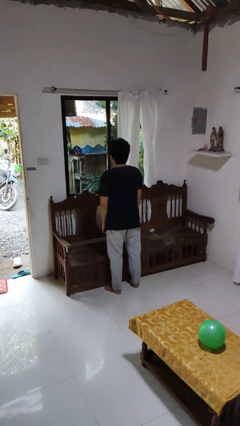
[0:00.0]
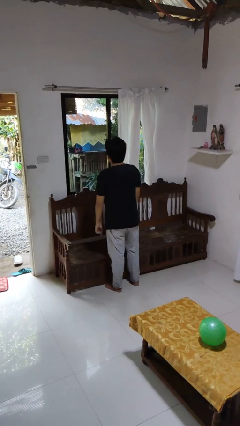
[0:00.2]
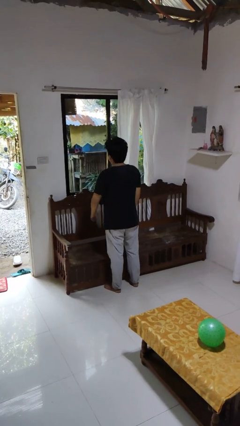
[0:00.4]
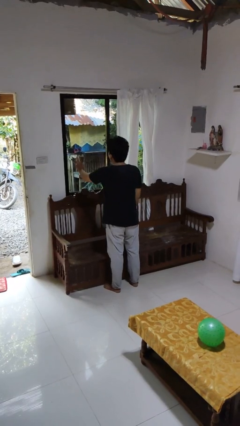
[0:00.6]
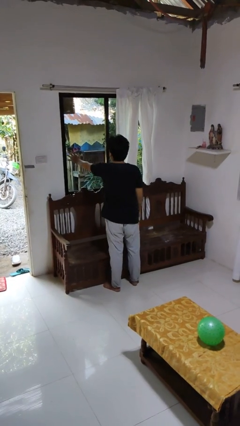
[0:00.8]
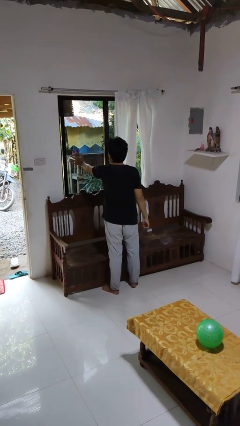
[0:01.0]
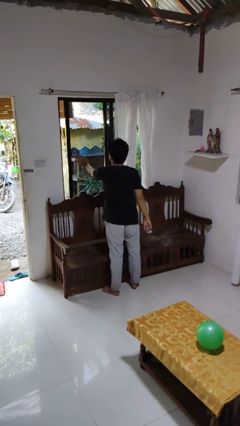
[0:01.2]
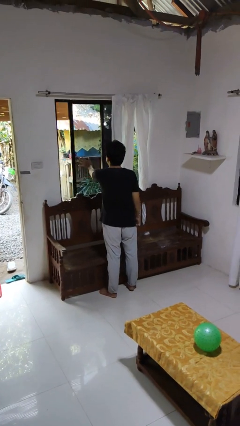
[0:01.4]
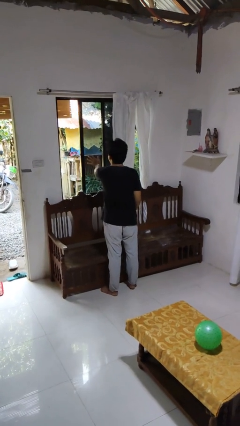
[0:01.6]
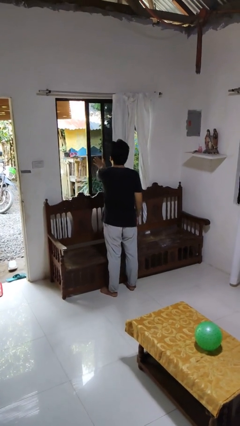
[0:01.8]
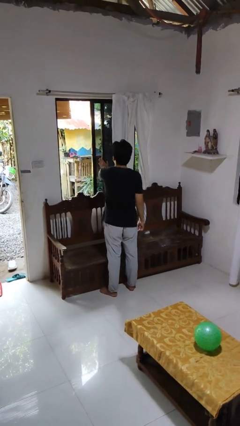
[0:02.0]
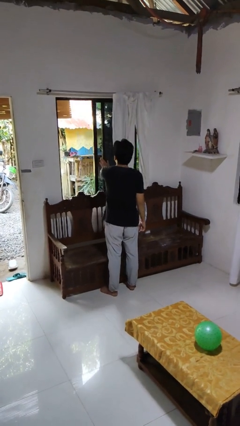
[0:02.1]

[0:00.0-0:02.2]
person opens home window

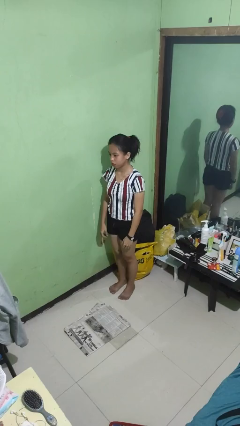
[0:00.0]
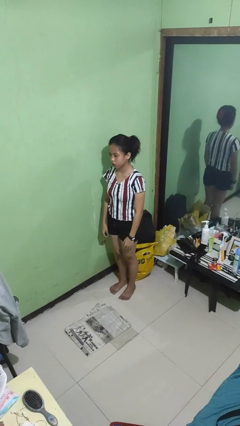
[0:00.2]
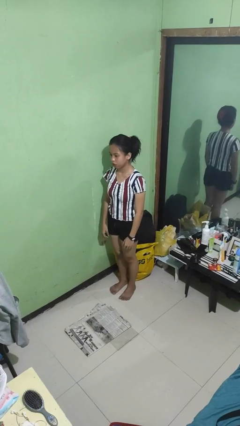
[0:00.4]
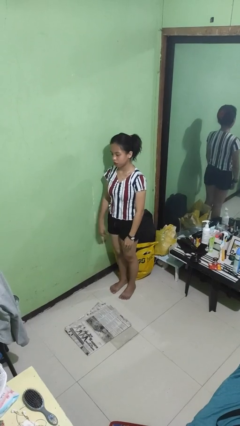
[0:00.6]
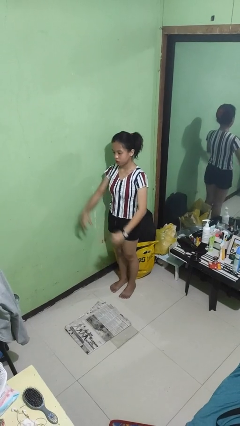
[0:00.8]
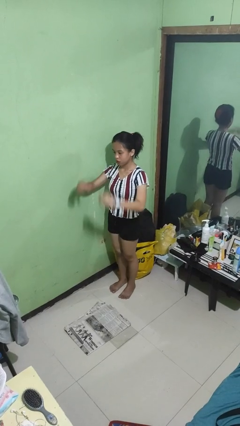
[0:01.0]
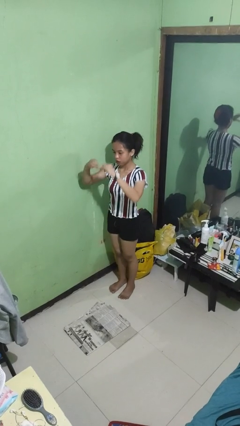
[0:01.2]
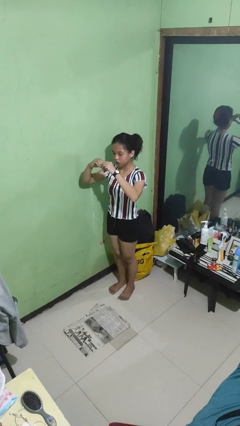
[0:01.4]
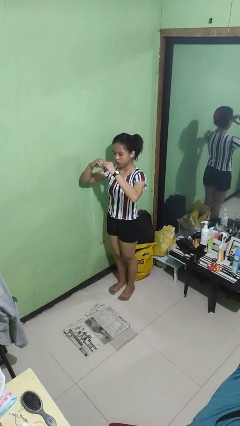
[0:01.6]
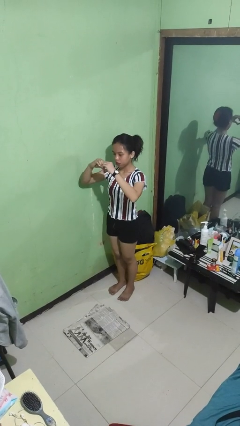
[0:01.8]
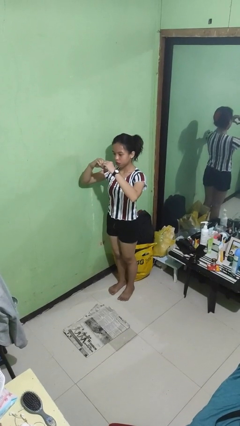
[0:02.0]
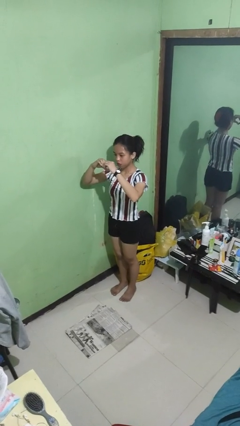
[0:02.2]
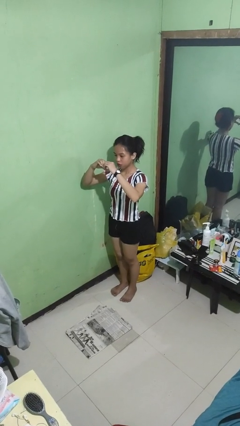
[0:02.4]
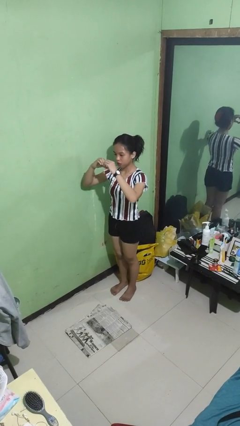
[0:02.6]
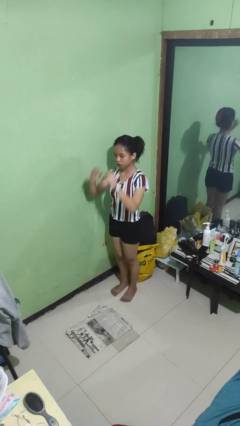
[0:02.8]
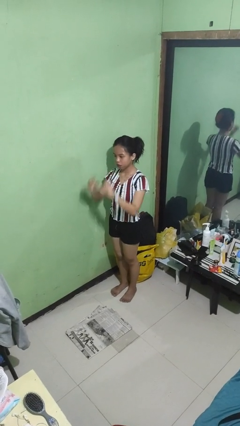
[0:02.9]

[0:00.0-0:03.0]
person gestures heart

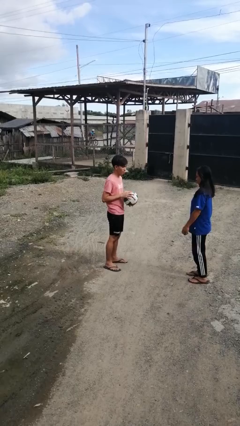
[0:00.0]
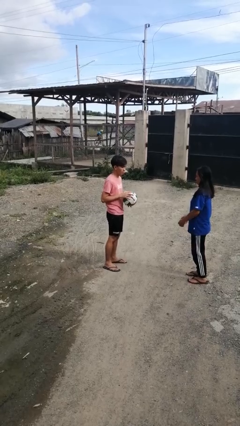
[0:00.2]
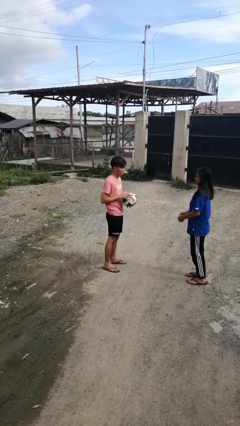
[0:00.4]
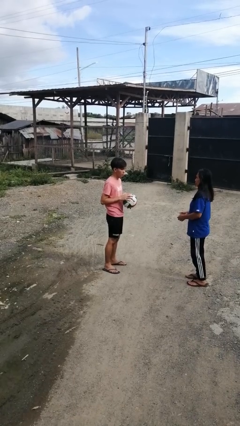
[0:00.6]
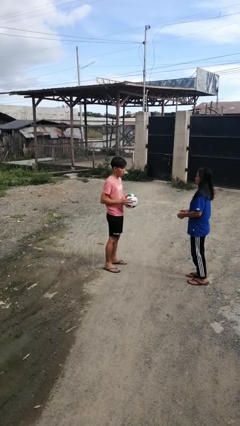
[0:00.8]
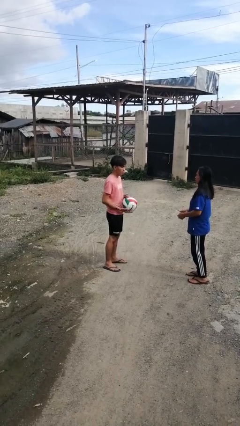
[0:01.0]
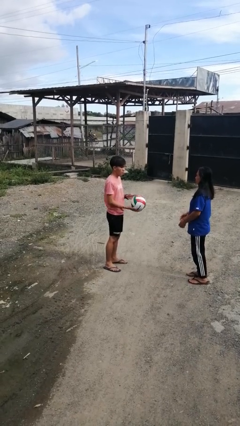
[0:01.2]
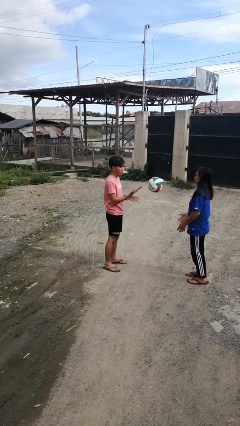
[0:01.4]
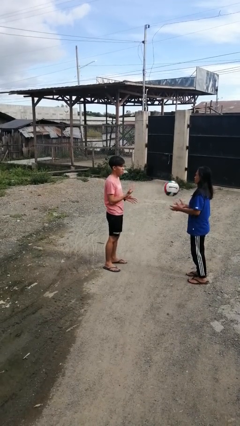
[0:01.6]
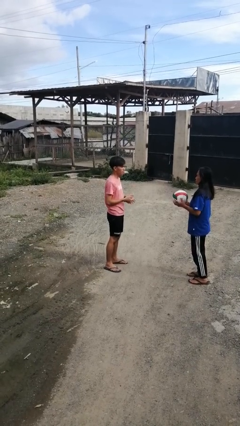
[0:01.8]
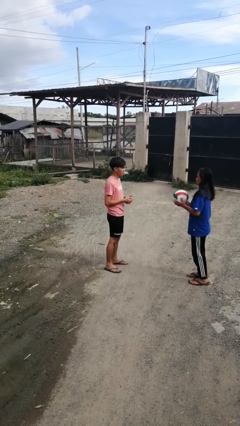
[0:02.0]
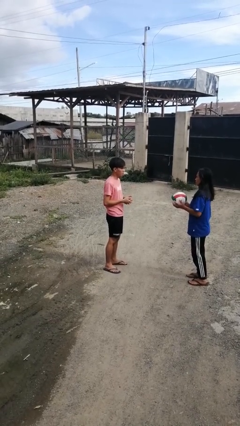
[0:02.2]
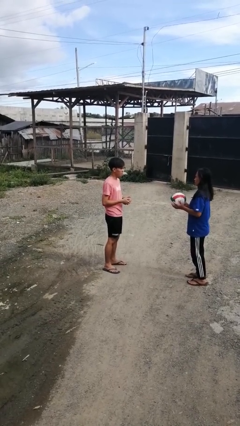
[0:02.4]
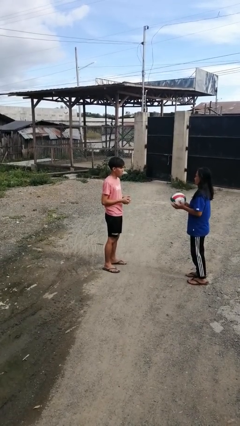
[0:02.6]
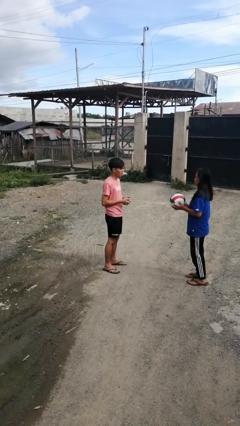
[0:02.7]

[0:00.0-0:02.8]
person throws object to person

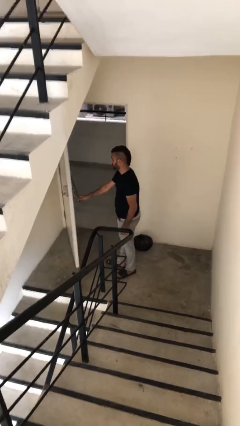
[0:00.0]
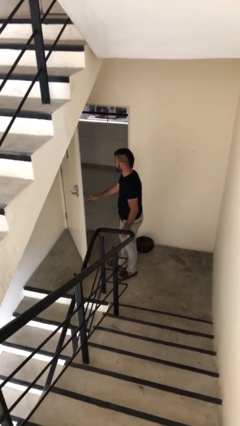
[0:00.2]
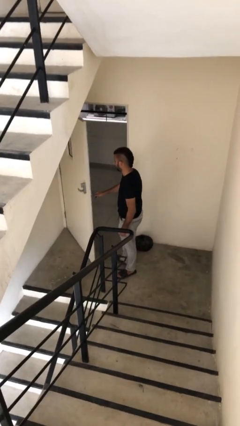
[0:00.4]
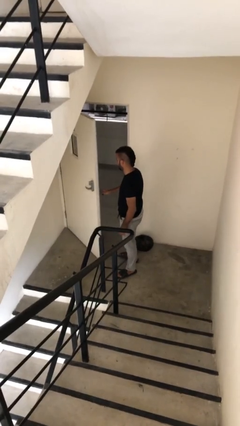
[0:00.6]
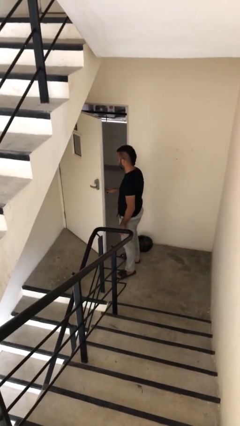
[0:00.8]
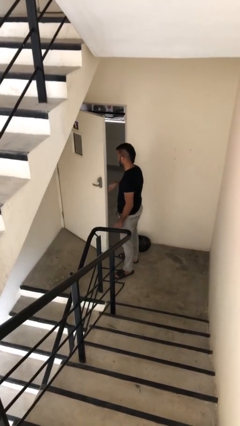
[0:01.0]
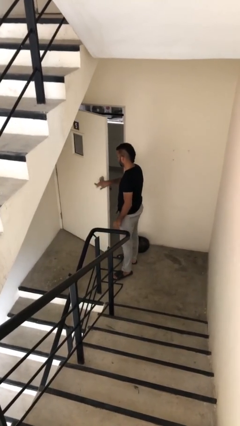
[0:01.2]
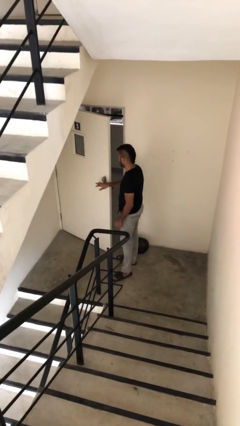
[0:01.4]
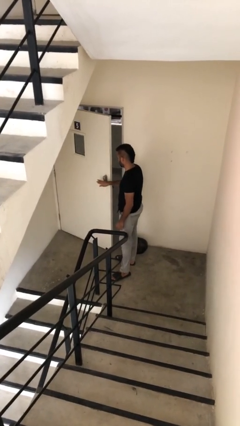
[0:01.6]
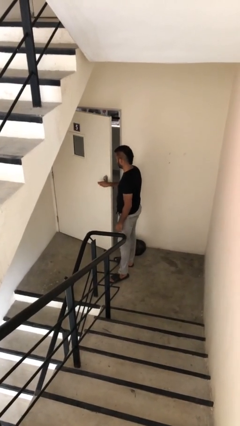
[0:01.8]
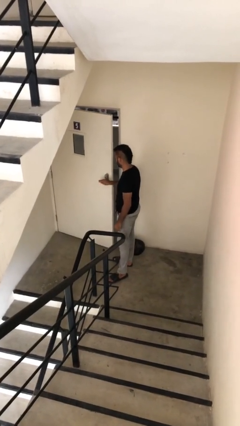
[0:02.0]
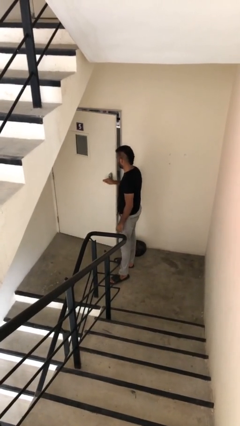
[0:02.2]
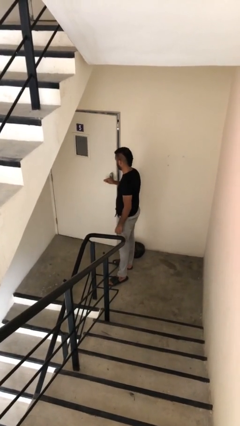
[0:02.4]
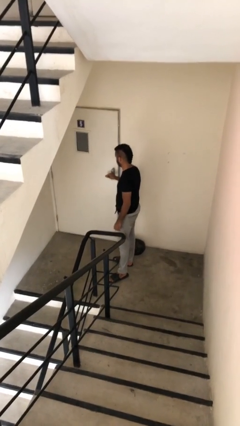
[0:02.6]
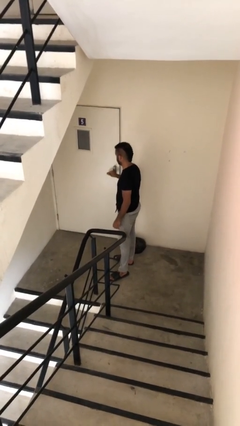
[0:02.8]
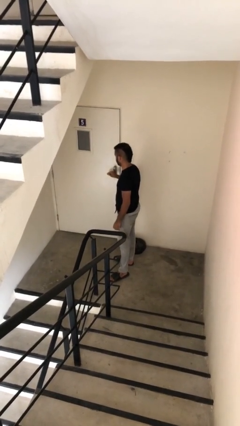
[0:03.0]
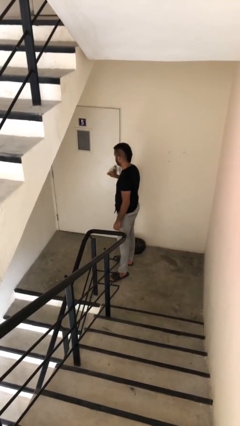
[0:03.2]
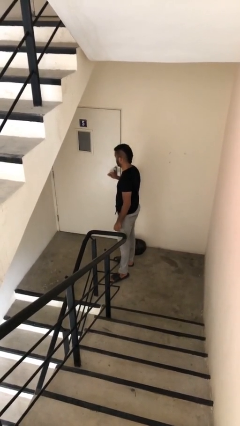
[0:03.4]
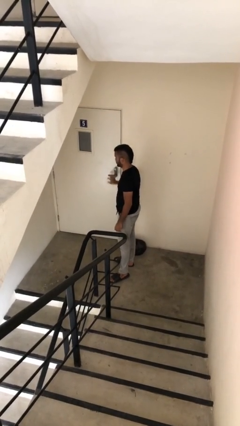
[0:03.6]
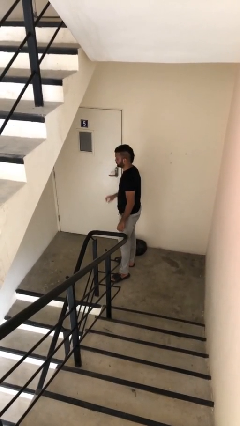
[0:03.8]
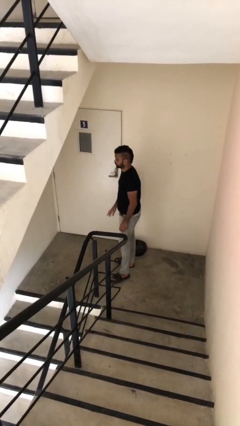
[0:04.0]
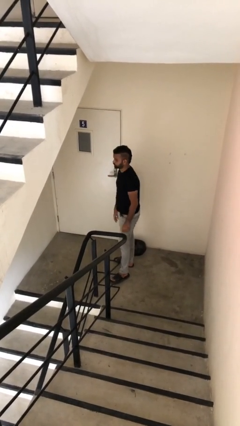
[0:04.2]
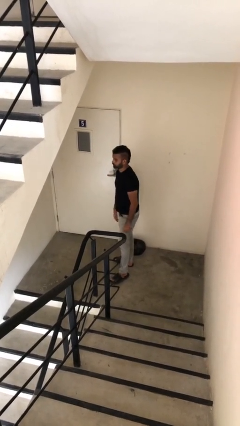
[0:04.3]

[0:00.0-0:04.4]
person closes facility door

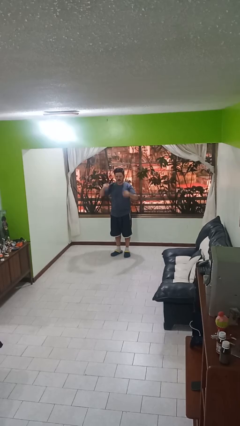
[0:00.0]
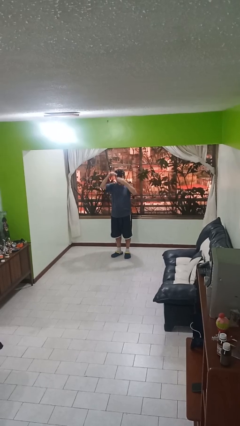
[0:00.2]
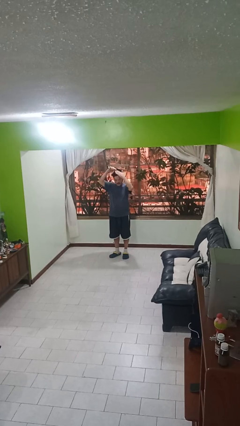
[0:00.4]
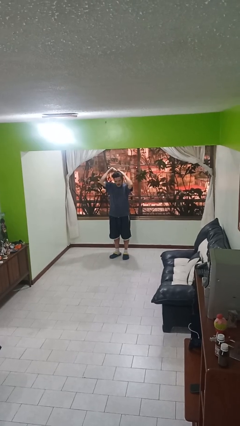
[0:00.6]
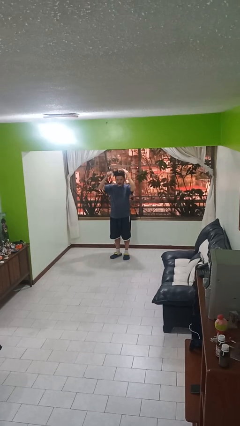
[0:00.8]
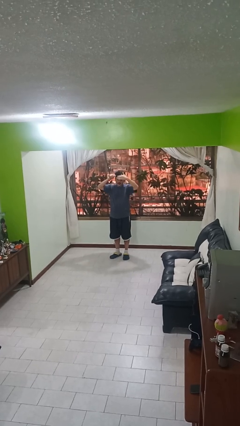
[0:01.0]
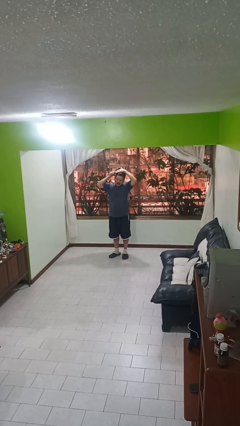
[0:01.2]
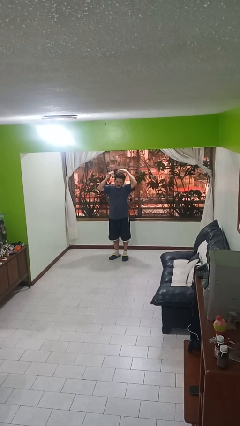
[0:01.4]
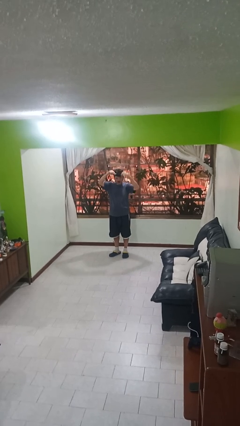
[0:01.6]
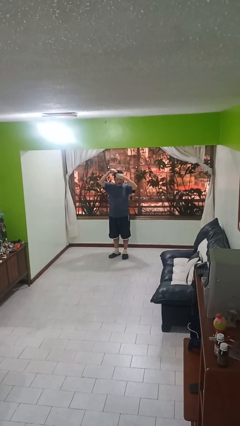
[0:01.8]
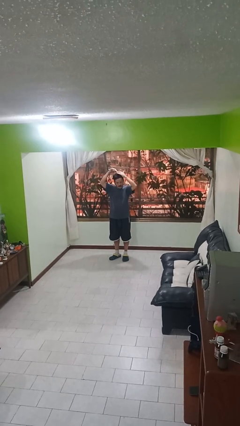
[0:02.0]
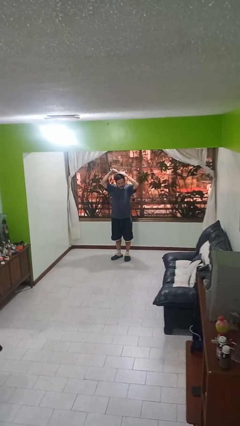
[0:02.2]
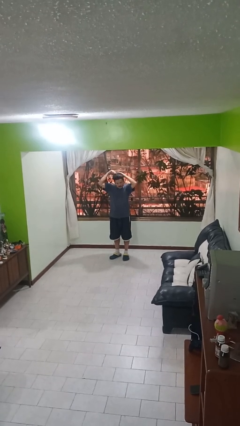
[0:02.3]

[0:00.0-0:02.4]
person brushes hair

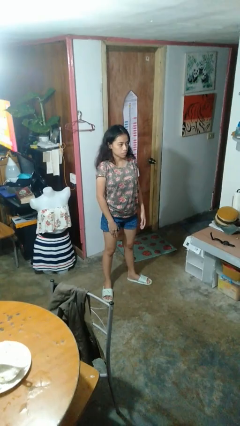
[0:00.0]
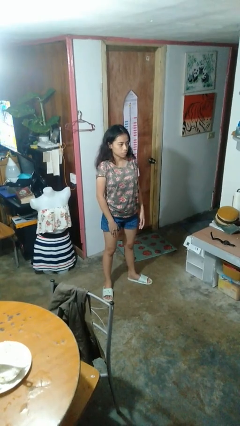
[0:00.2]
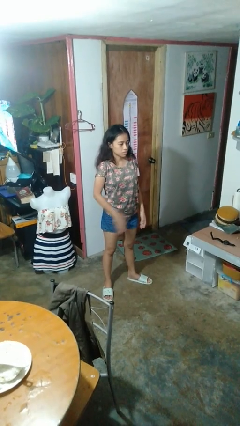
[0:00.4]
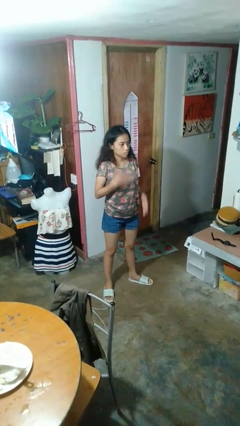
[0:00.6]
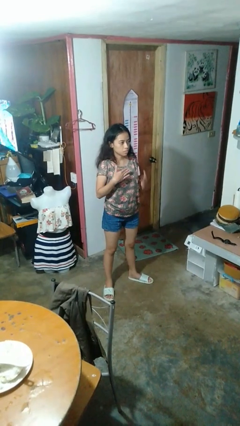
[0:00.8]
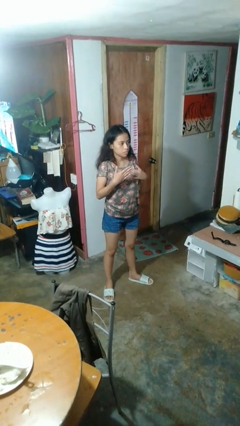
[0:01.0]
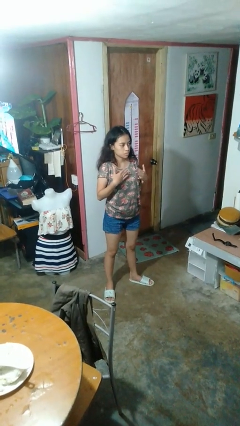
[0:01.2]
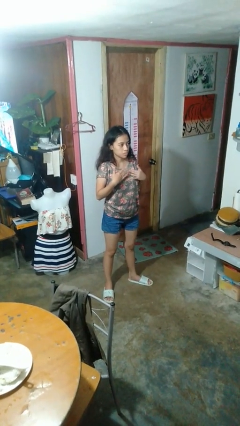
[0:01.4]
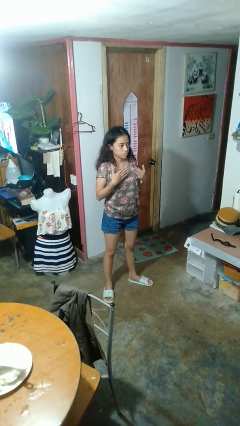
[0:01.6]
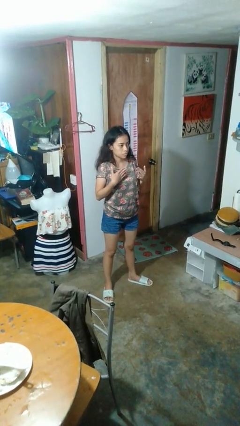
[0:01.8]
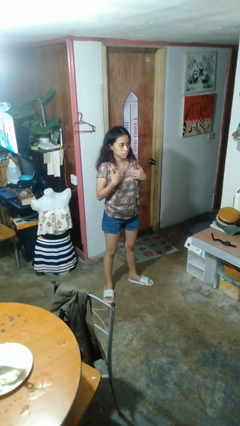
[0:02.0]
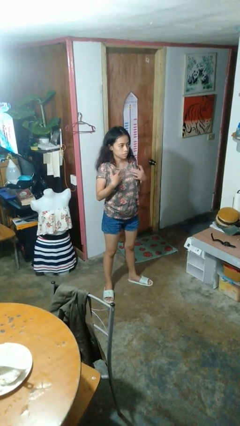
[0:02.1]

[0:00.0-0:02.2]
person drums on chest
